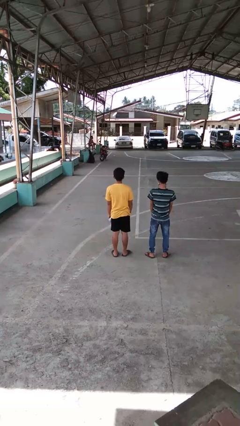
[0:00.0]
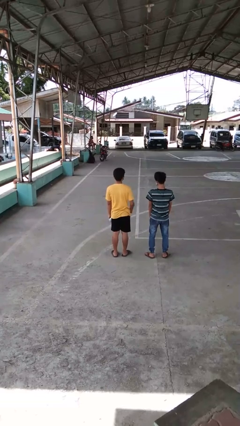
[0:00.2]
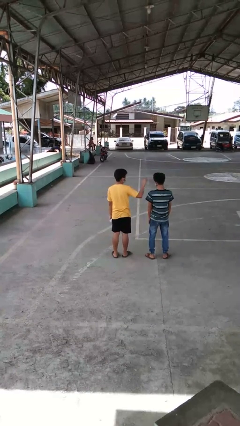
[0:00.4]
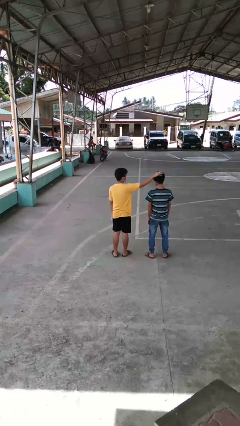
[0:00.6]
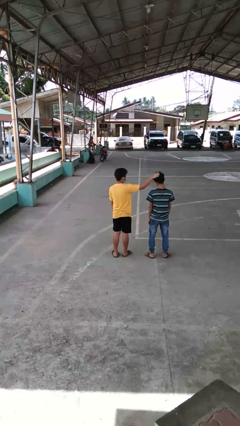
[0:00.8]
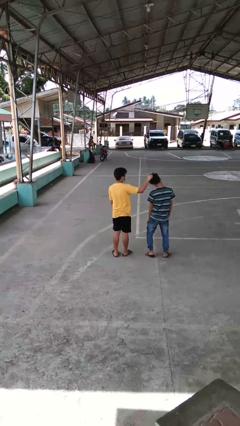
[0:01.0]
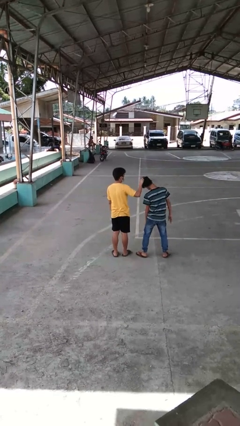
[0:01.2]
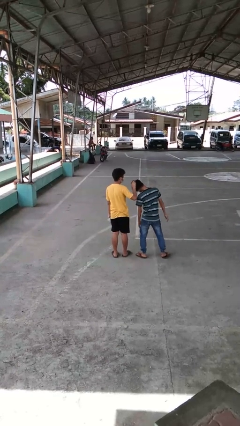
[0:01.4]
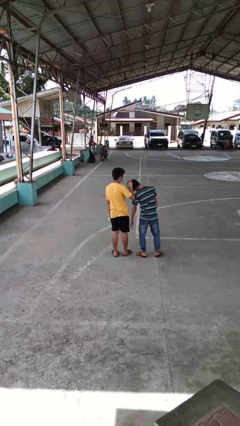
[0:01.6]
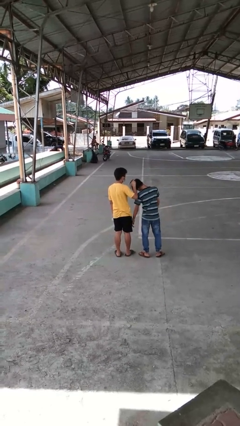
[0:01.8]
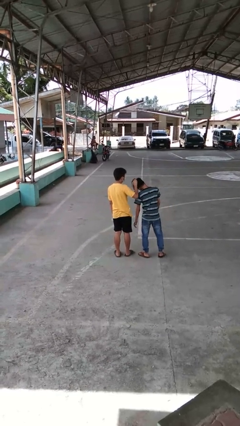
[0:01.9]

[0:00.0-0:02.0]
person grabs person by hair

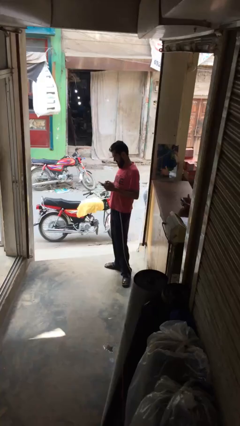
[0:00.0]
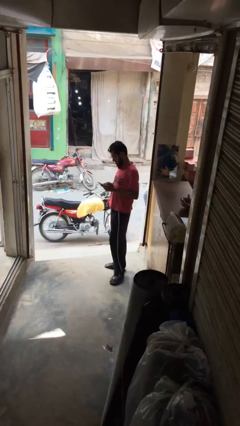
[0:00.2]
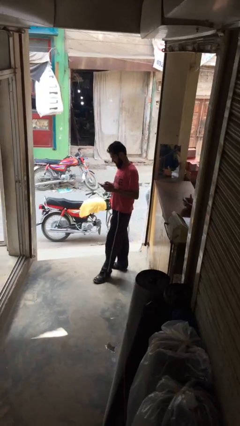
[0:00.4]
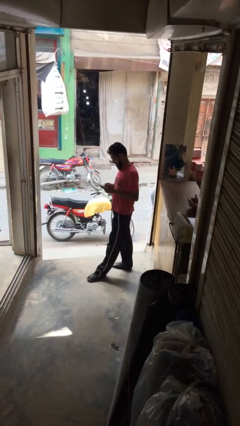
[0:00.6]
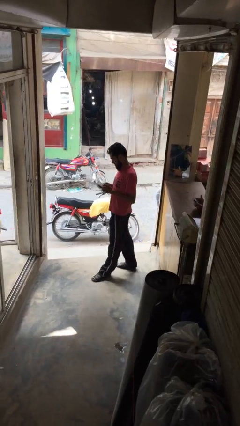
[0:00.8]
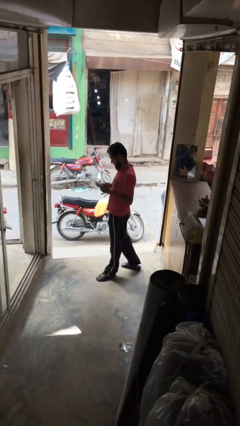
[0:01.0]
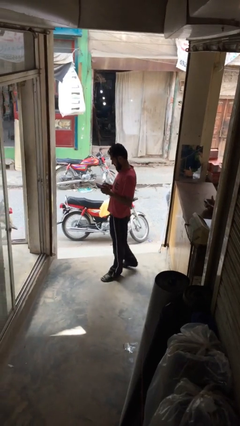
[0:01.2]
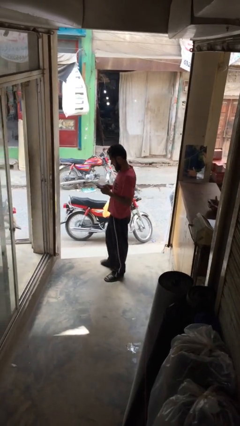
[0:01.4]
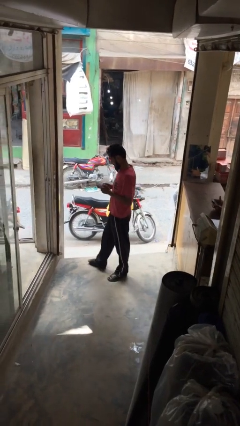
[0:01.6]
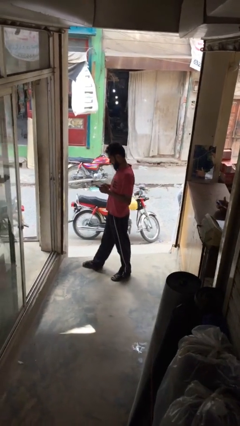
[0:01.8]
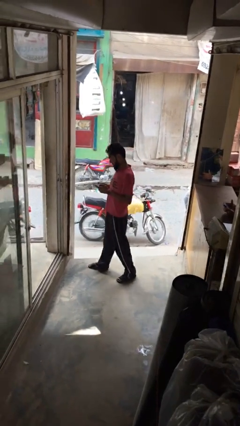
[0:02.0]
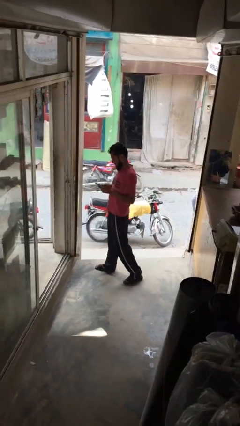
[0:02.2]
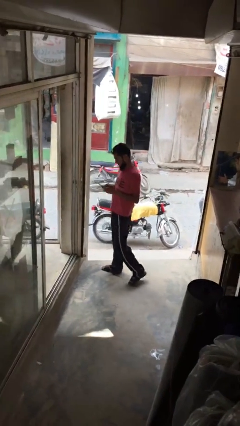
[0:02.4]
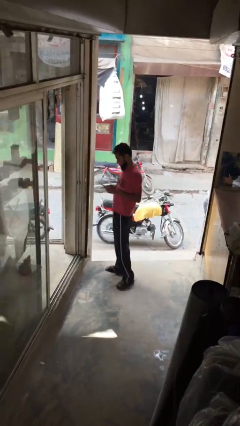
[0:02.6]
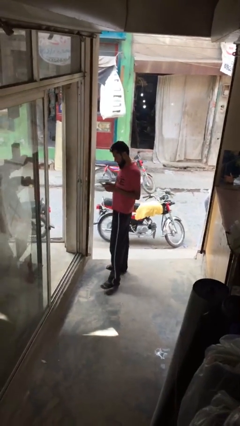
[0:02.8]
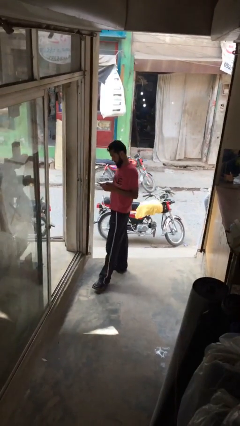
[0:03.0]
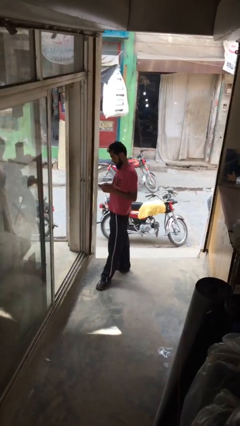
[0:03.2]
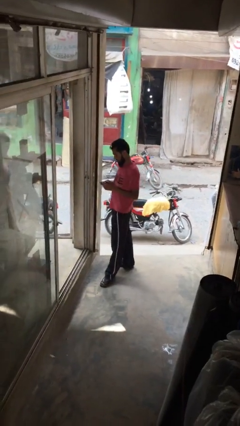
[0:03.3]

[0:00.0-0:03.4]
person texts on phone

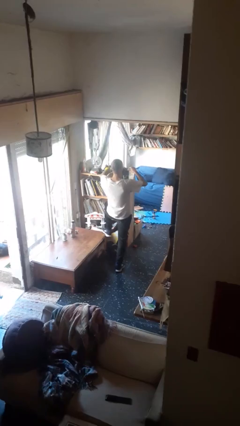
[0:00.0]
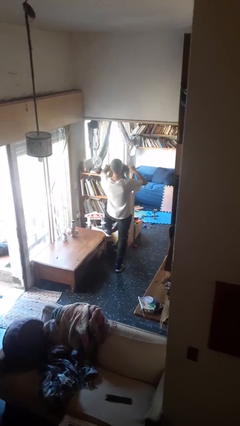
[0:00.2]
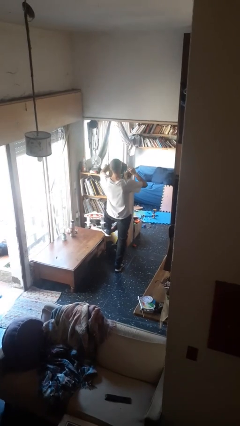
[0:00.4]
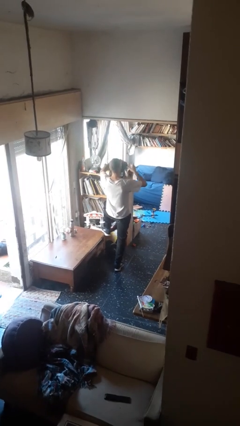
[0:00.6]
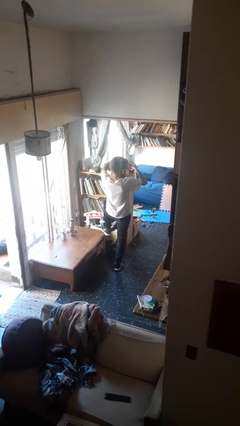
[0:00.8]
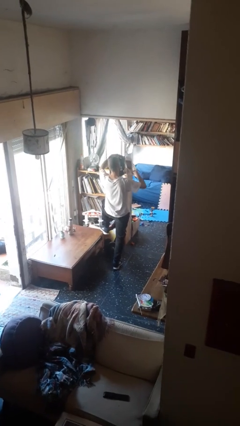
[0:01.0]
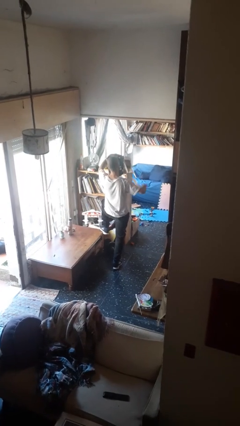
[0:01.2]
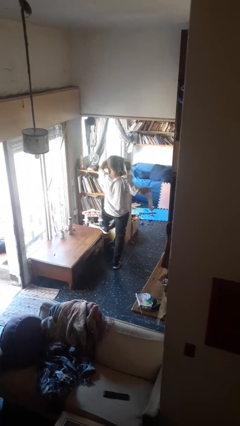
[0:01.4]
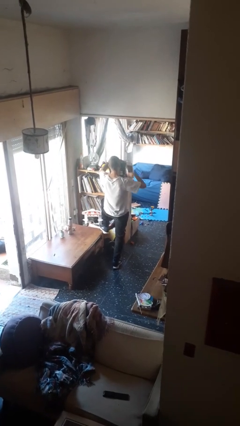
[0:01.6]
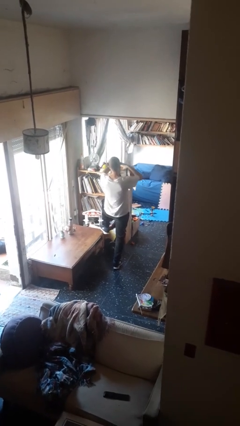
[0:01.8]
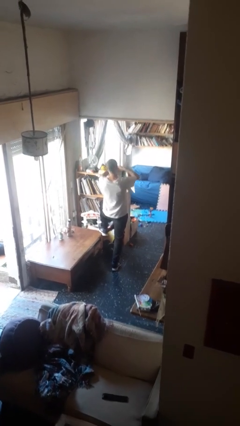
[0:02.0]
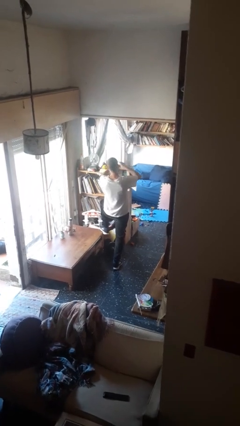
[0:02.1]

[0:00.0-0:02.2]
person tears paper

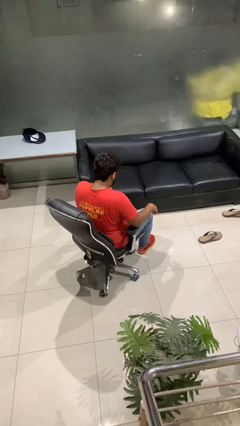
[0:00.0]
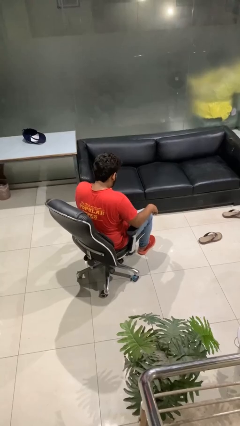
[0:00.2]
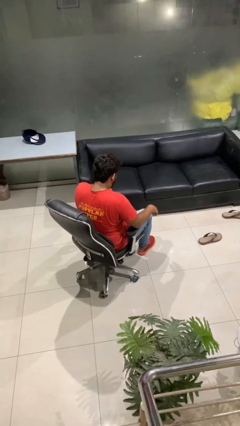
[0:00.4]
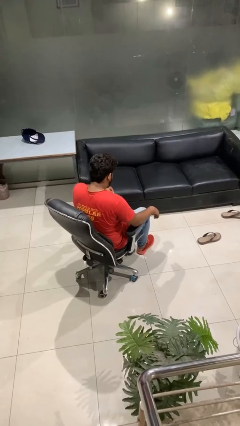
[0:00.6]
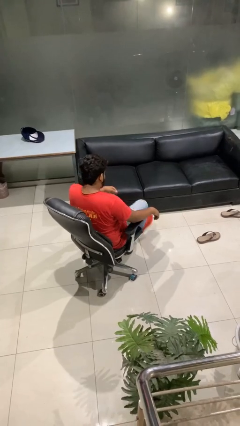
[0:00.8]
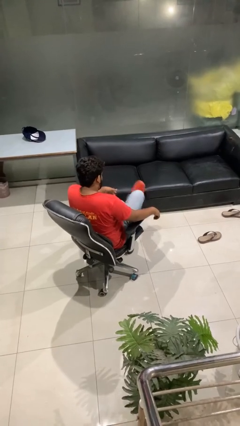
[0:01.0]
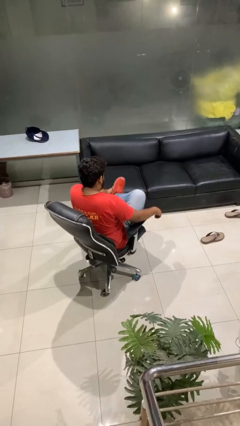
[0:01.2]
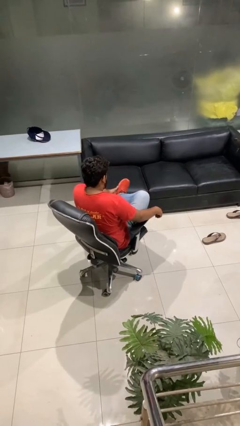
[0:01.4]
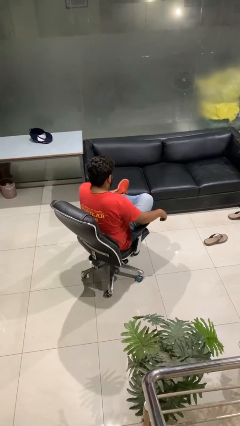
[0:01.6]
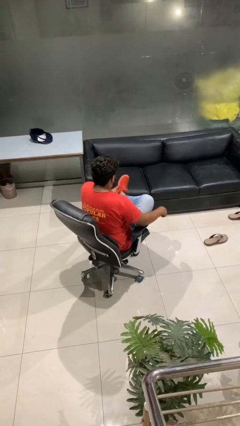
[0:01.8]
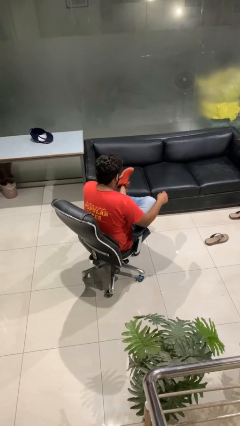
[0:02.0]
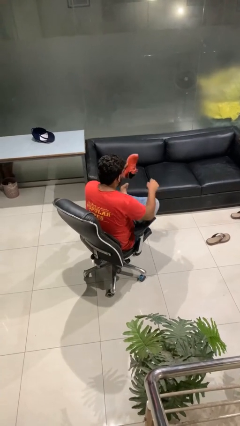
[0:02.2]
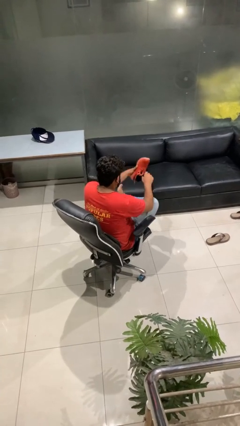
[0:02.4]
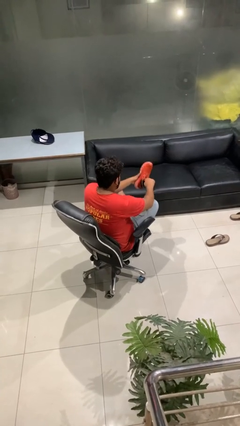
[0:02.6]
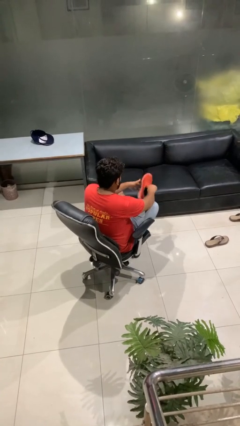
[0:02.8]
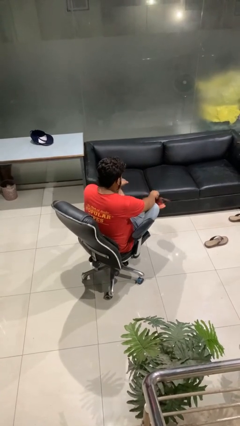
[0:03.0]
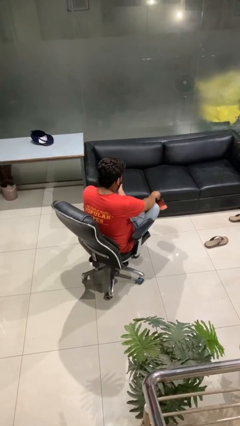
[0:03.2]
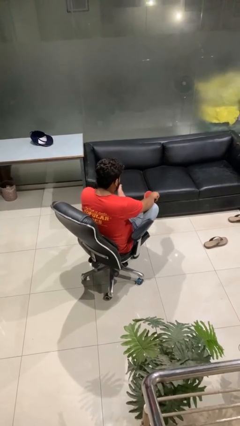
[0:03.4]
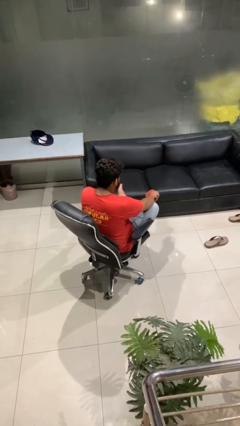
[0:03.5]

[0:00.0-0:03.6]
person takes off shoes

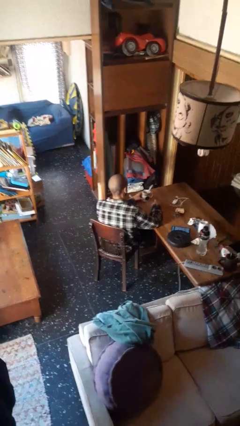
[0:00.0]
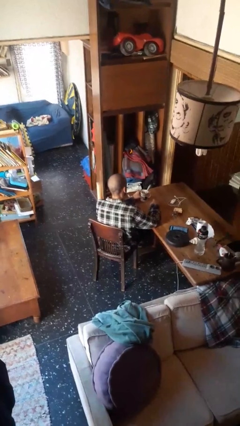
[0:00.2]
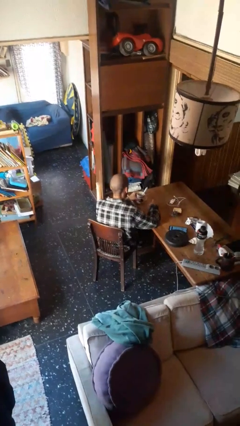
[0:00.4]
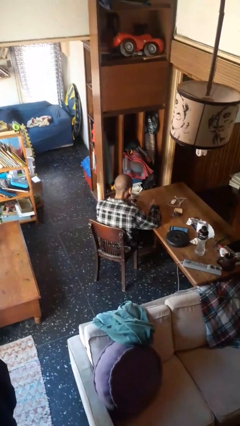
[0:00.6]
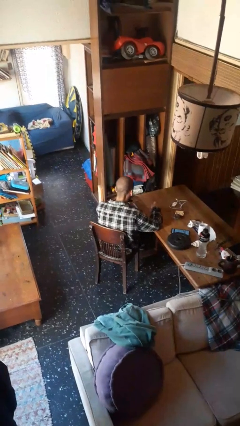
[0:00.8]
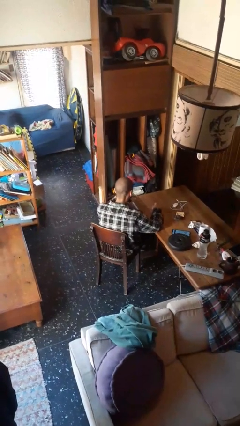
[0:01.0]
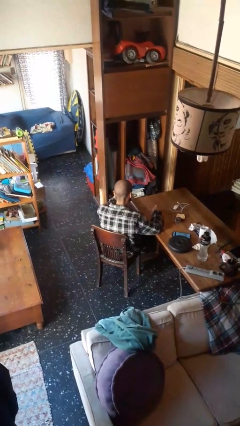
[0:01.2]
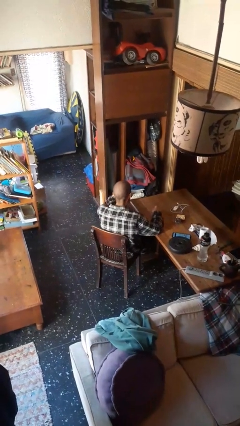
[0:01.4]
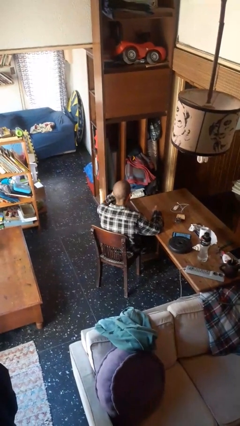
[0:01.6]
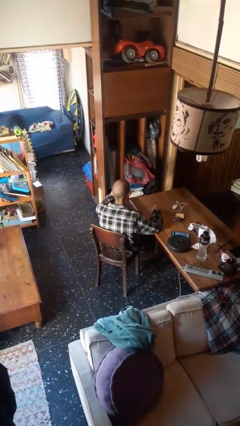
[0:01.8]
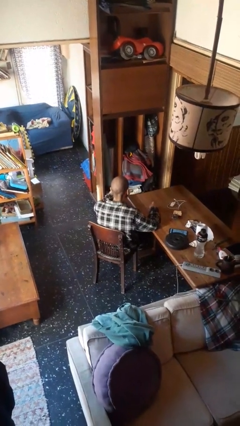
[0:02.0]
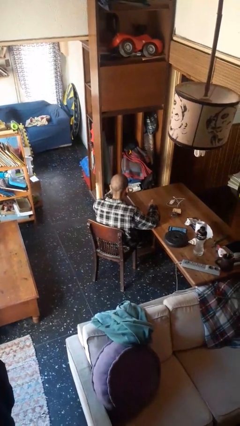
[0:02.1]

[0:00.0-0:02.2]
person drinks from mug

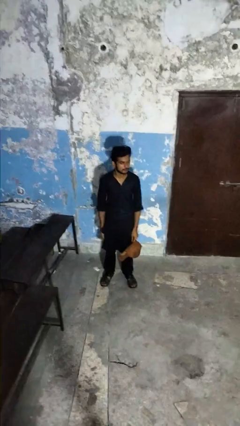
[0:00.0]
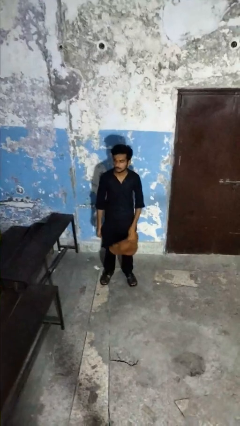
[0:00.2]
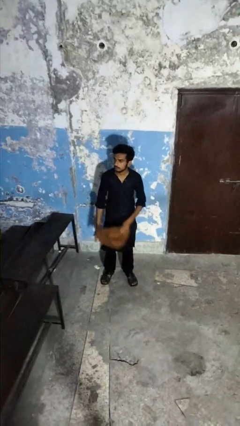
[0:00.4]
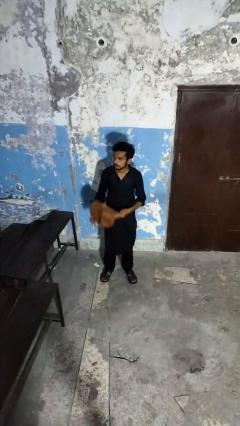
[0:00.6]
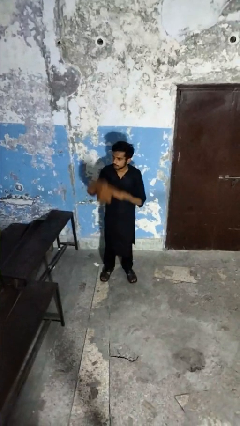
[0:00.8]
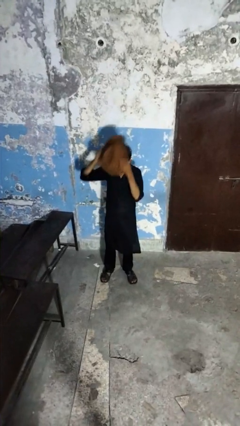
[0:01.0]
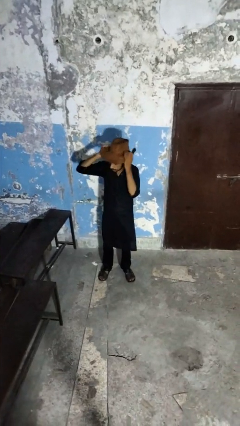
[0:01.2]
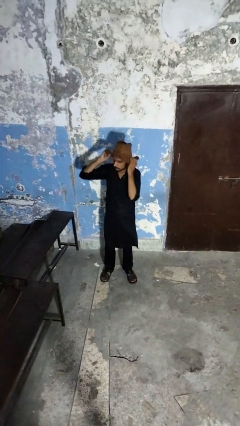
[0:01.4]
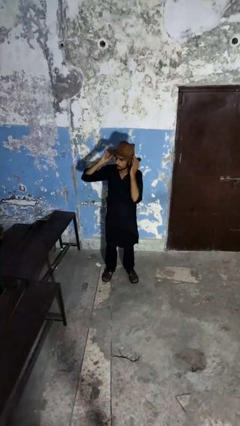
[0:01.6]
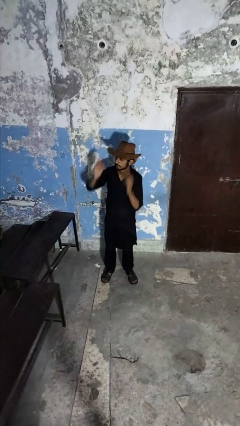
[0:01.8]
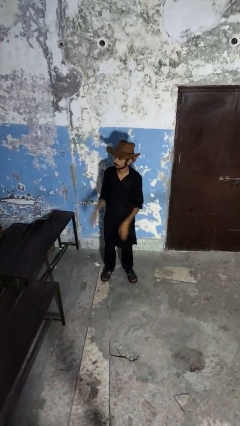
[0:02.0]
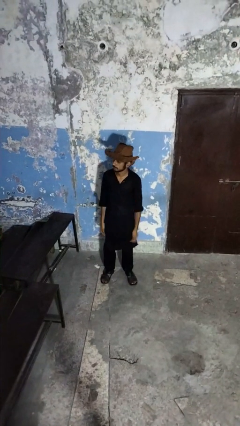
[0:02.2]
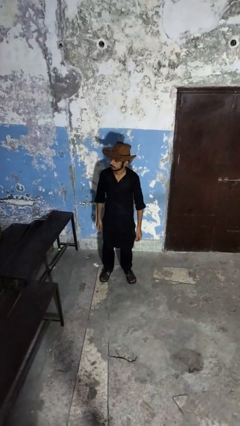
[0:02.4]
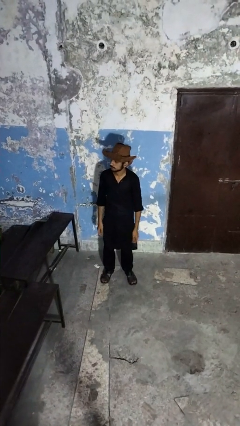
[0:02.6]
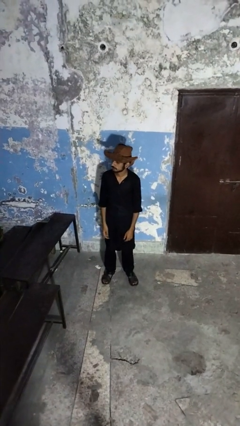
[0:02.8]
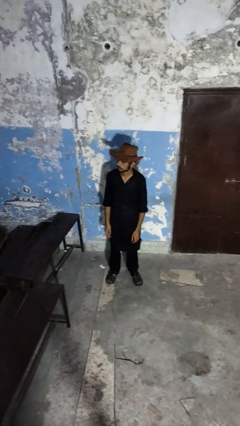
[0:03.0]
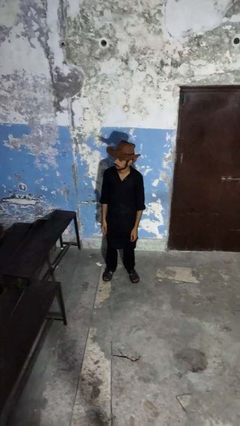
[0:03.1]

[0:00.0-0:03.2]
person puts on hat

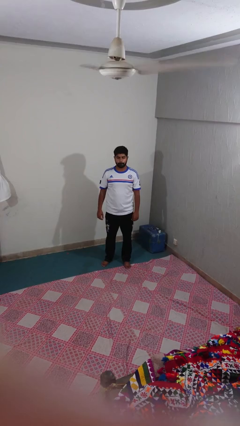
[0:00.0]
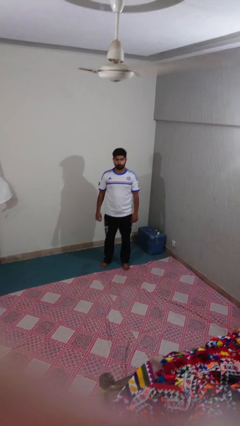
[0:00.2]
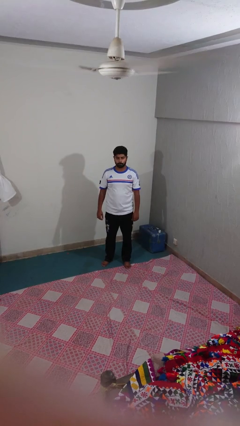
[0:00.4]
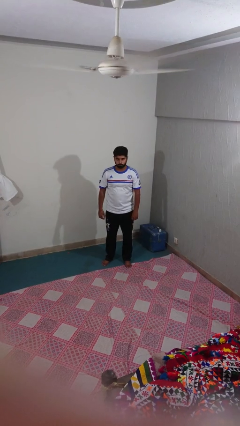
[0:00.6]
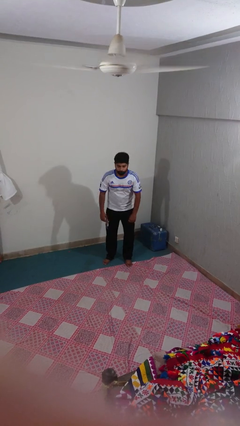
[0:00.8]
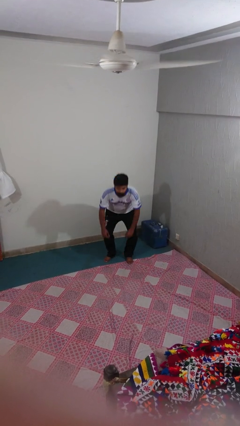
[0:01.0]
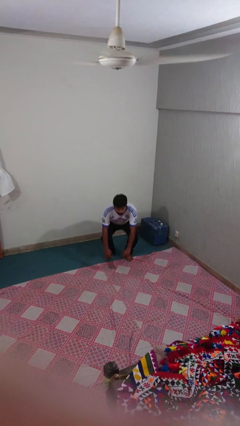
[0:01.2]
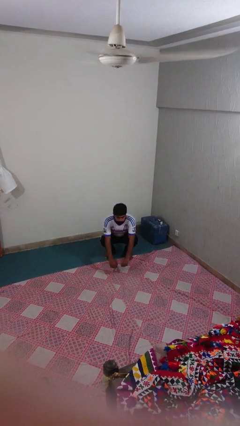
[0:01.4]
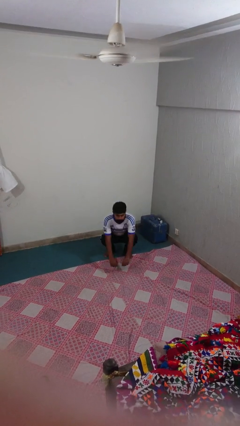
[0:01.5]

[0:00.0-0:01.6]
person squats
